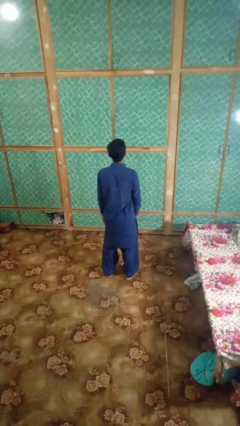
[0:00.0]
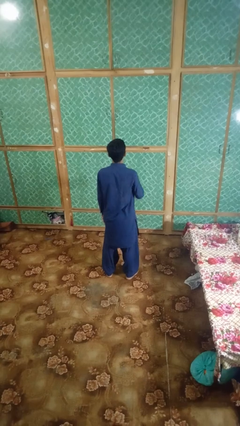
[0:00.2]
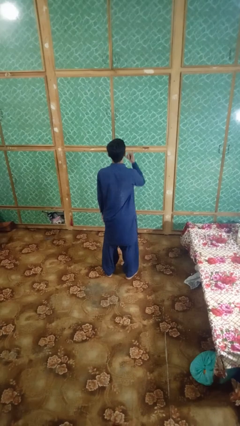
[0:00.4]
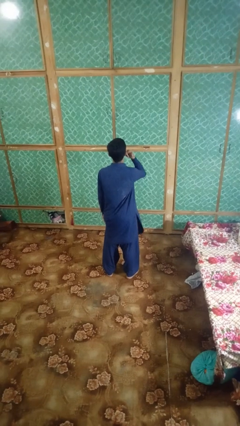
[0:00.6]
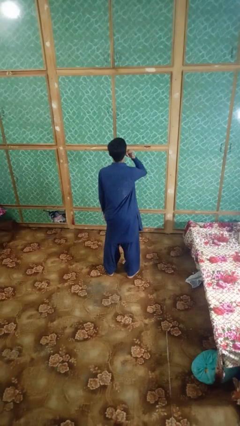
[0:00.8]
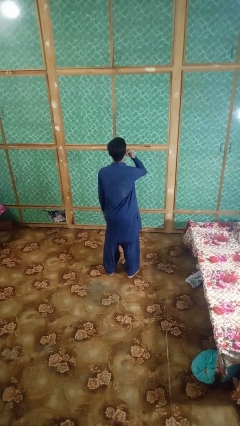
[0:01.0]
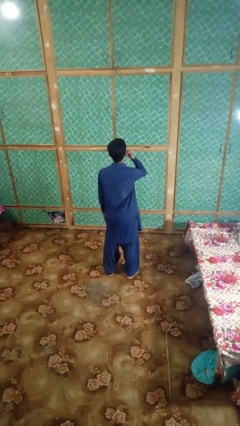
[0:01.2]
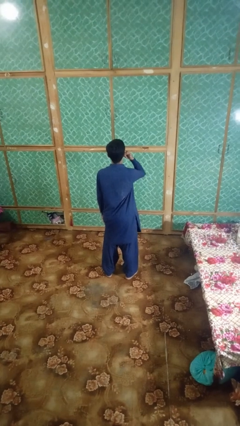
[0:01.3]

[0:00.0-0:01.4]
person gestures call me

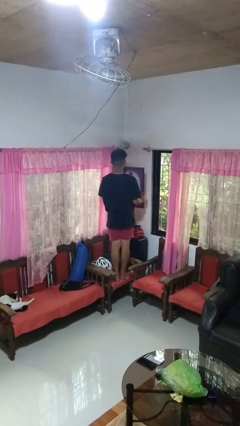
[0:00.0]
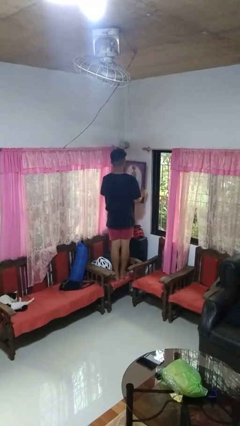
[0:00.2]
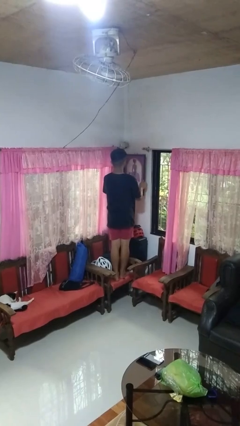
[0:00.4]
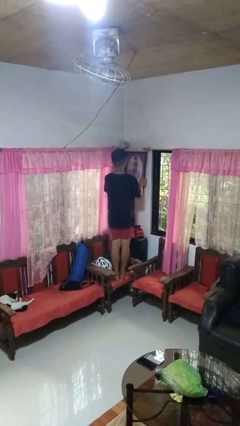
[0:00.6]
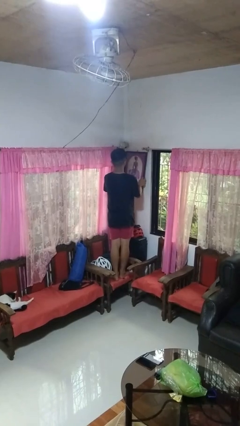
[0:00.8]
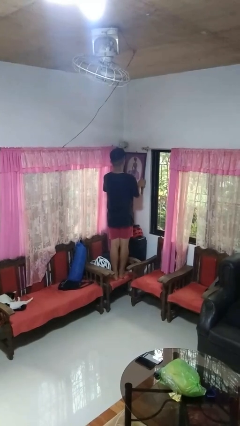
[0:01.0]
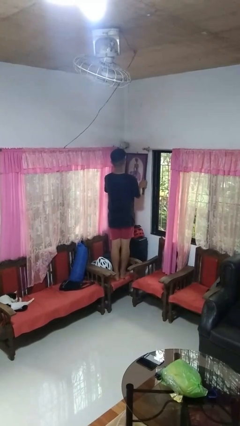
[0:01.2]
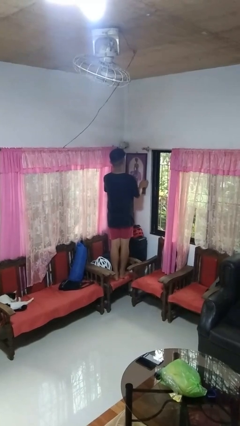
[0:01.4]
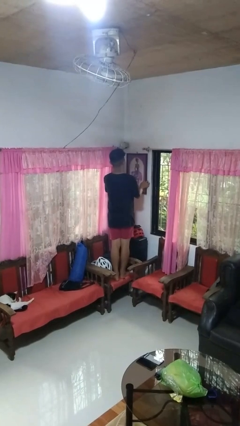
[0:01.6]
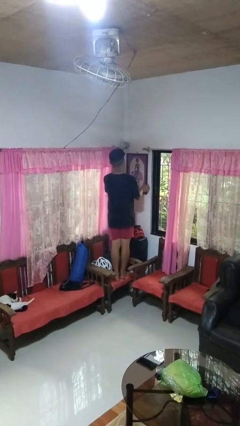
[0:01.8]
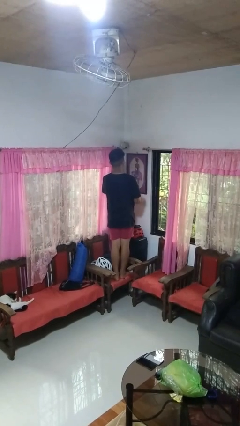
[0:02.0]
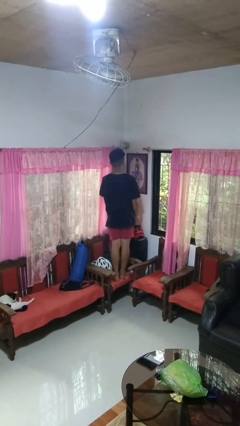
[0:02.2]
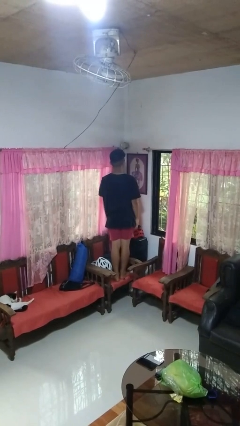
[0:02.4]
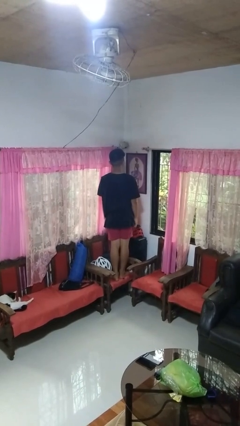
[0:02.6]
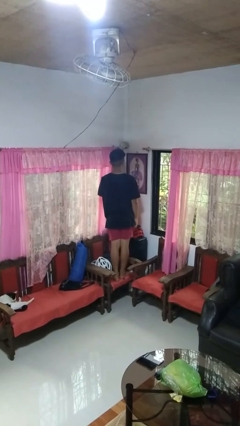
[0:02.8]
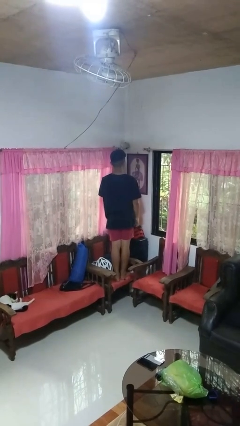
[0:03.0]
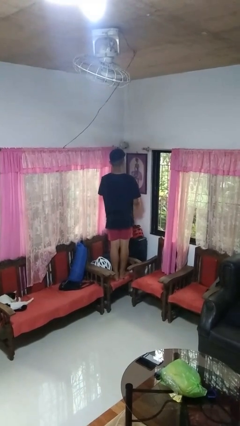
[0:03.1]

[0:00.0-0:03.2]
person puts up picture frame

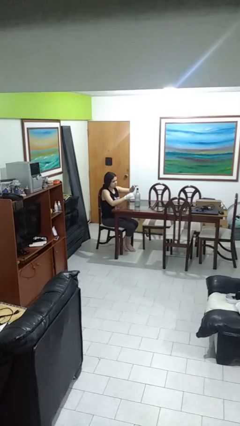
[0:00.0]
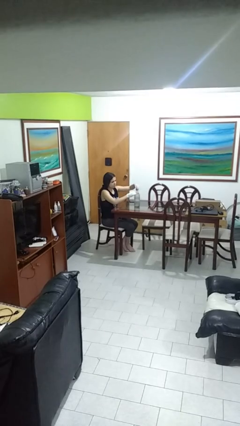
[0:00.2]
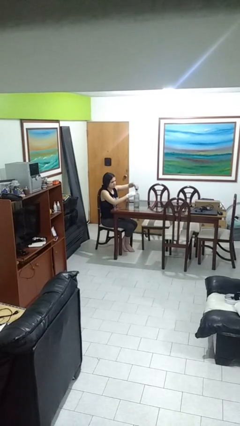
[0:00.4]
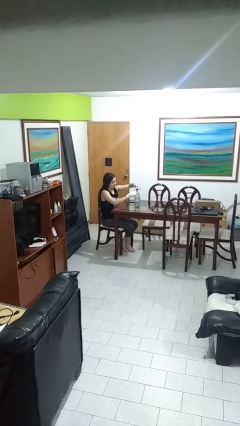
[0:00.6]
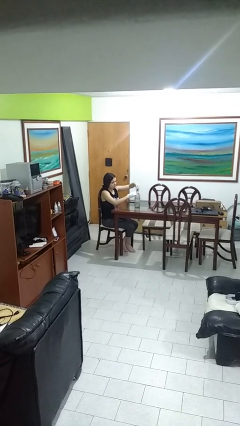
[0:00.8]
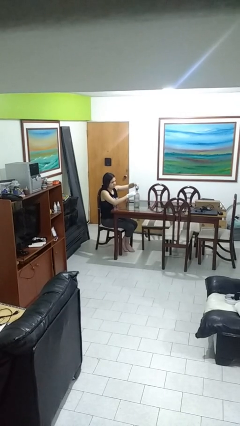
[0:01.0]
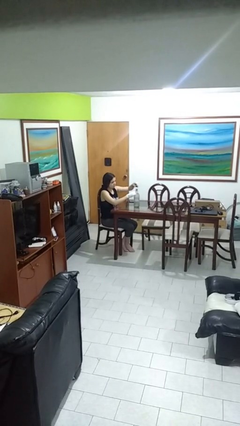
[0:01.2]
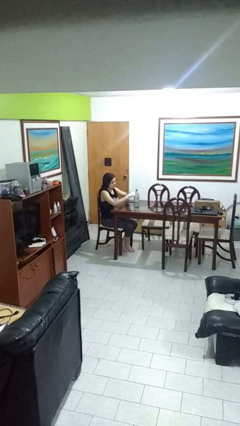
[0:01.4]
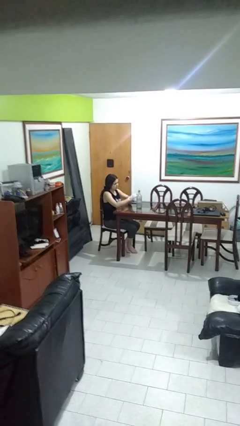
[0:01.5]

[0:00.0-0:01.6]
person unscrews lid from bottle

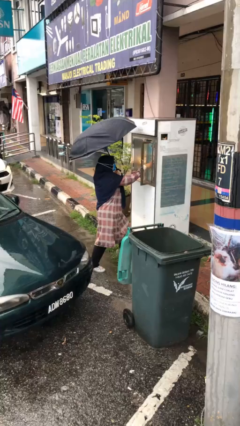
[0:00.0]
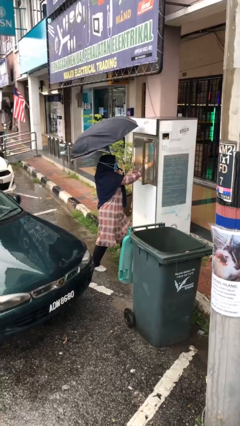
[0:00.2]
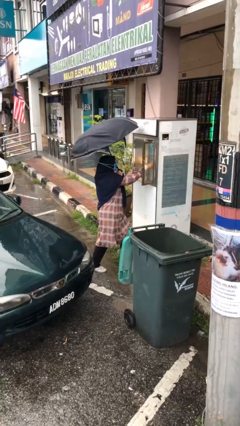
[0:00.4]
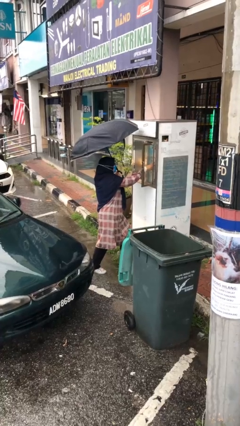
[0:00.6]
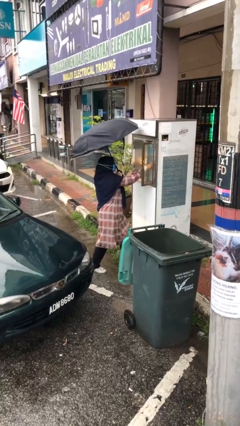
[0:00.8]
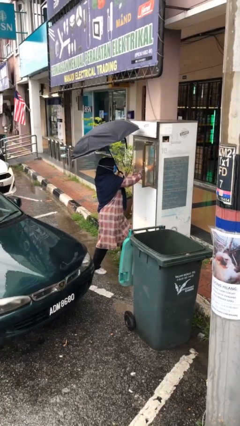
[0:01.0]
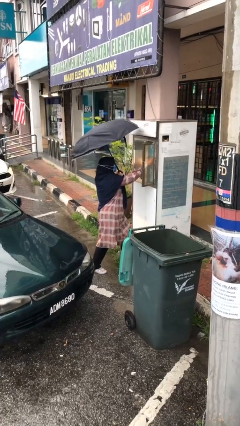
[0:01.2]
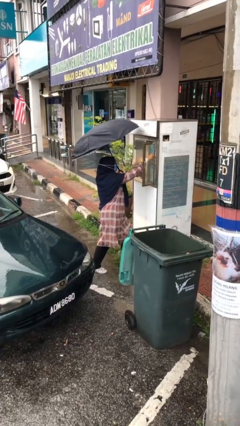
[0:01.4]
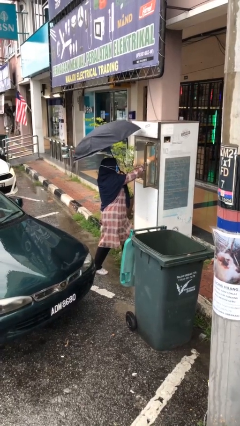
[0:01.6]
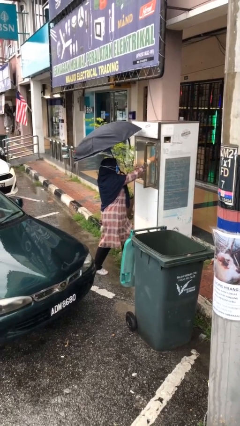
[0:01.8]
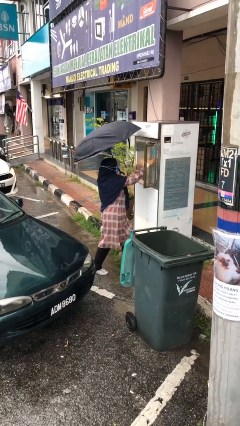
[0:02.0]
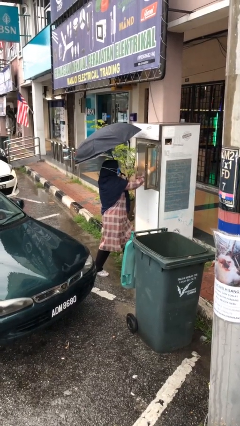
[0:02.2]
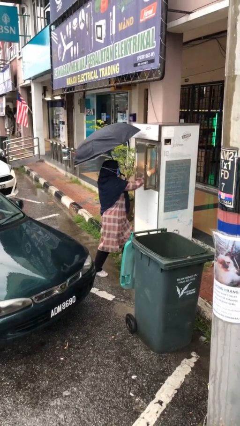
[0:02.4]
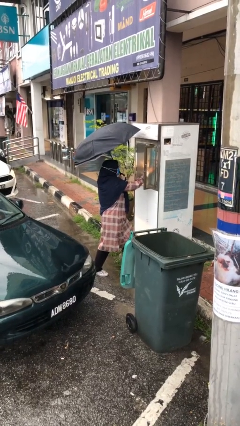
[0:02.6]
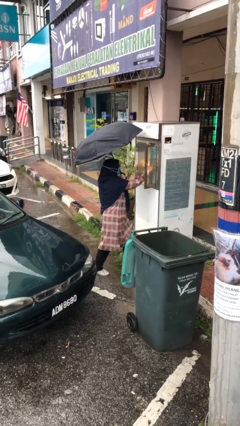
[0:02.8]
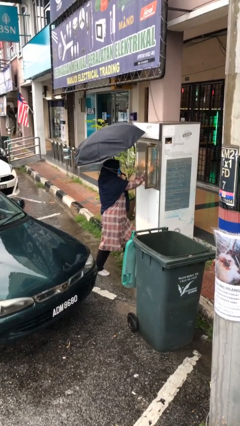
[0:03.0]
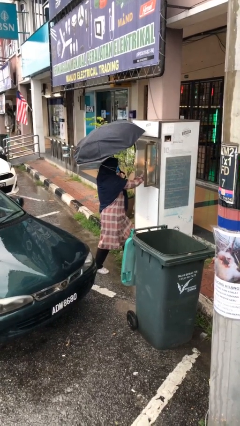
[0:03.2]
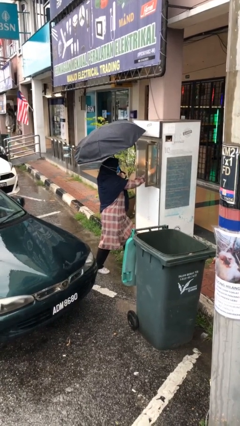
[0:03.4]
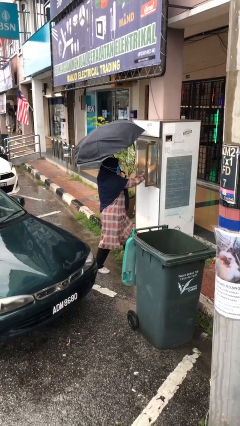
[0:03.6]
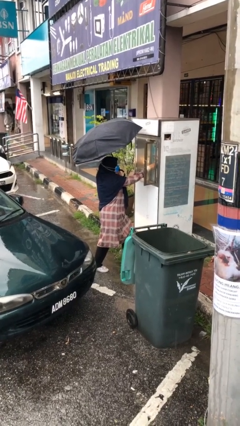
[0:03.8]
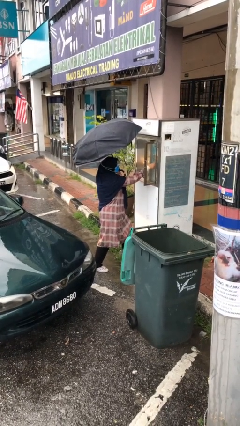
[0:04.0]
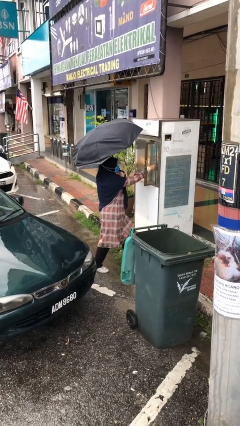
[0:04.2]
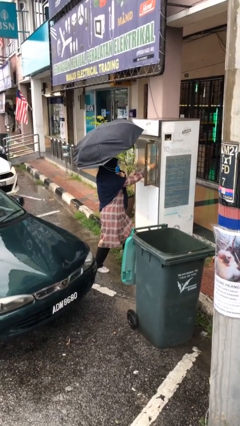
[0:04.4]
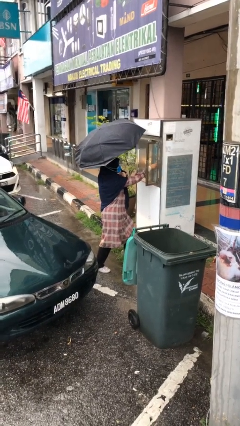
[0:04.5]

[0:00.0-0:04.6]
person purchases from machine

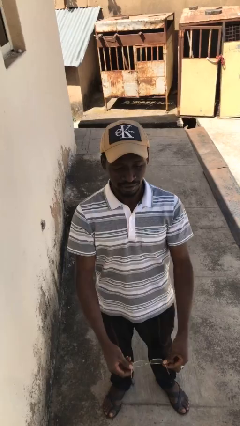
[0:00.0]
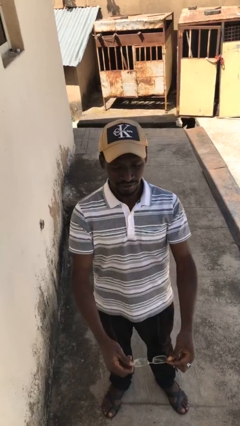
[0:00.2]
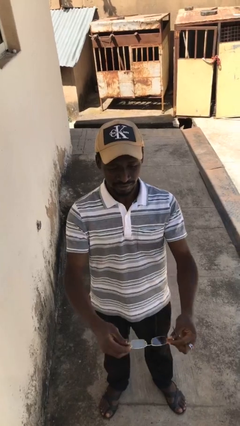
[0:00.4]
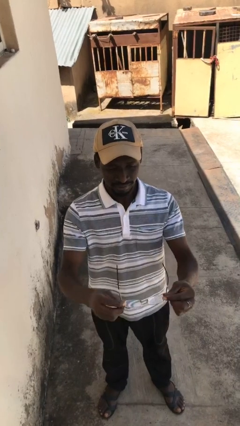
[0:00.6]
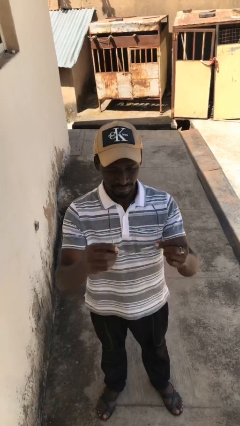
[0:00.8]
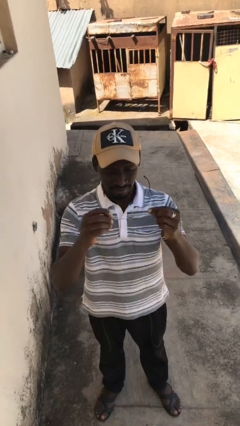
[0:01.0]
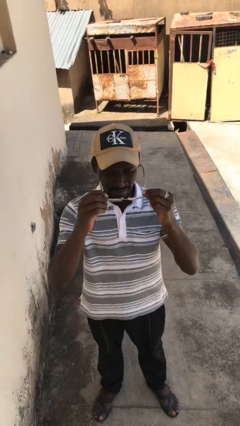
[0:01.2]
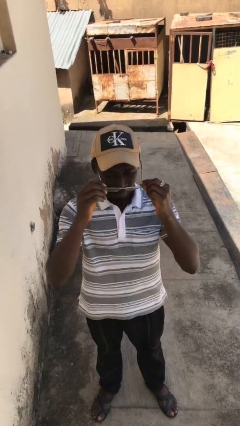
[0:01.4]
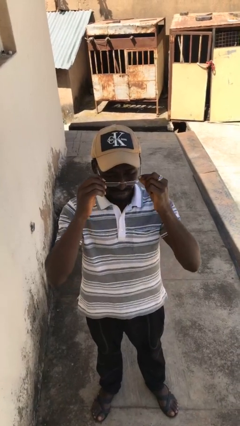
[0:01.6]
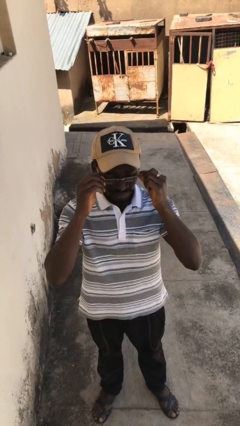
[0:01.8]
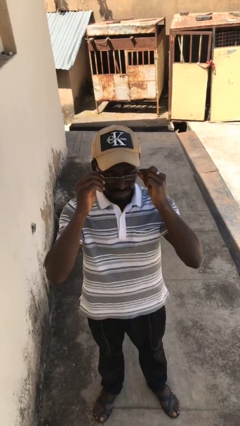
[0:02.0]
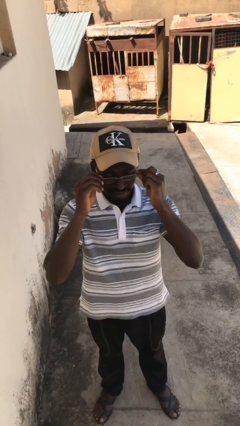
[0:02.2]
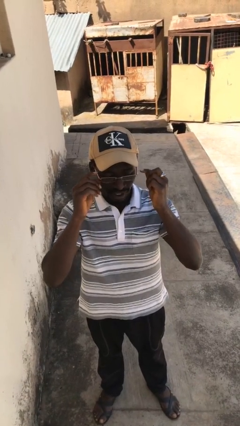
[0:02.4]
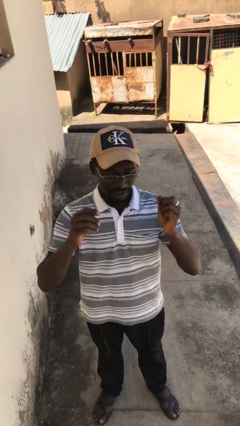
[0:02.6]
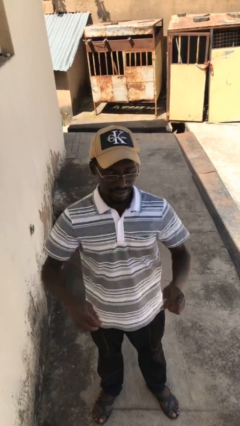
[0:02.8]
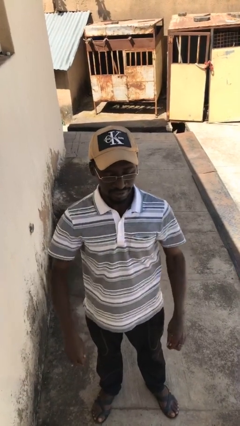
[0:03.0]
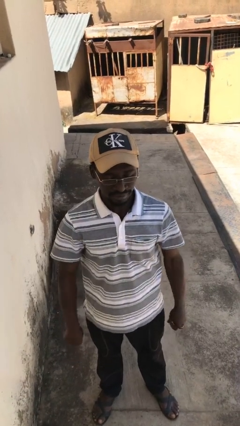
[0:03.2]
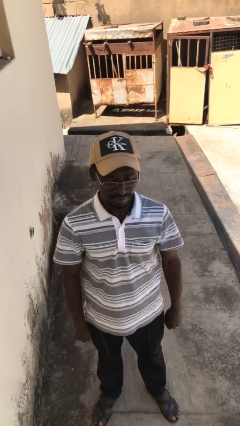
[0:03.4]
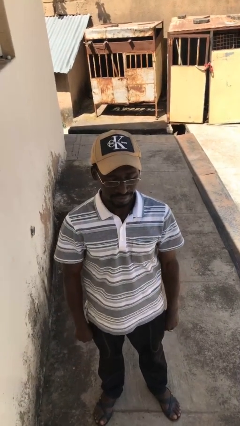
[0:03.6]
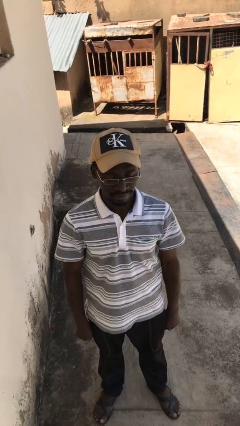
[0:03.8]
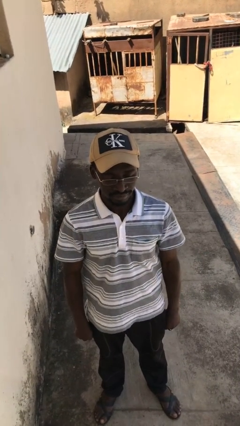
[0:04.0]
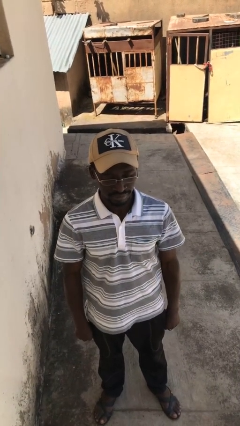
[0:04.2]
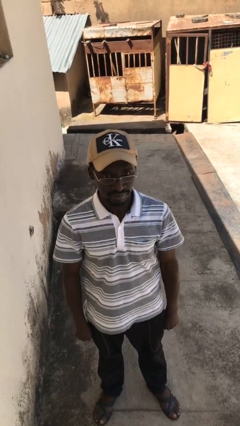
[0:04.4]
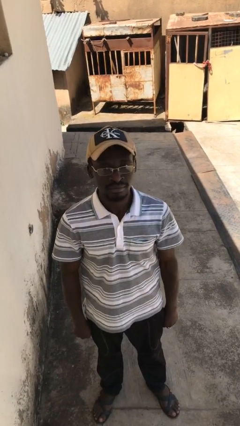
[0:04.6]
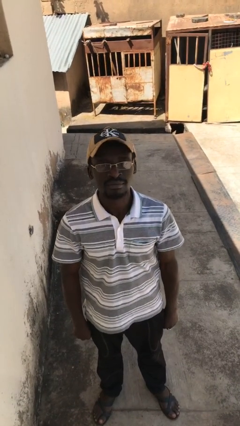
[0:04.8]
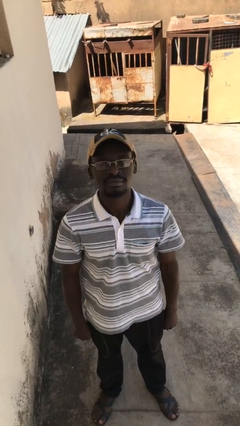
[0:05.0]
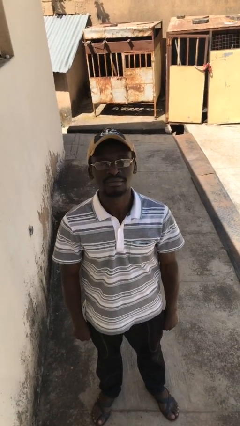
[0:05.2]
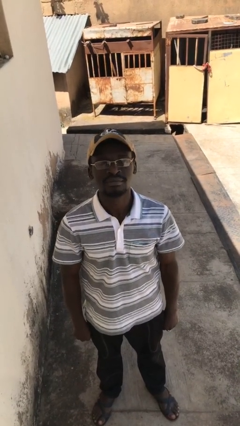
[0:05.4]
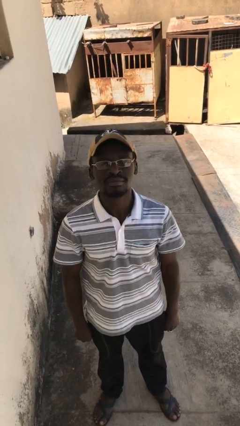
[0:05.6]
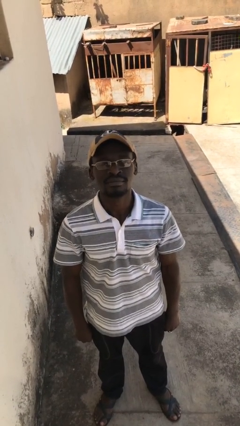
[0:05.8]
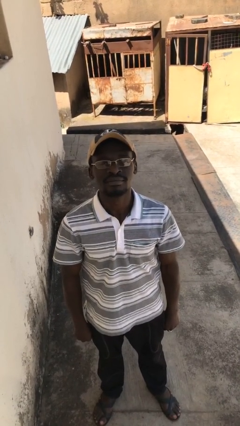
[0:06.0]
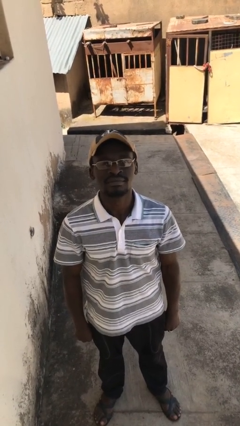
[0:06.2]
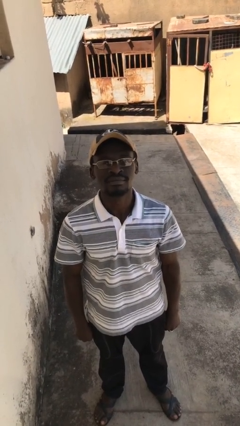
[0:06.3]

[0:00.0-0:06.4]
person puts on glasses

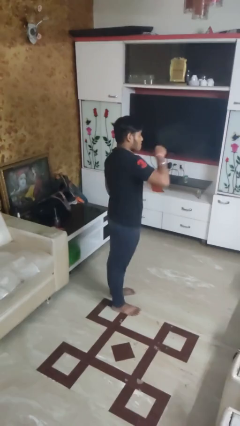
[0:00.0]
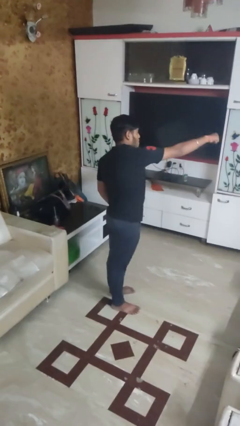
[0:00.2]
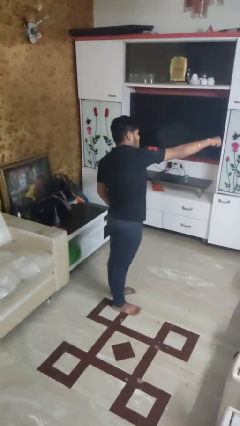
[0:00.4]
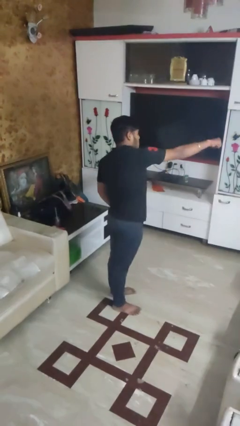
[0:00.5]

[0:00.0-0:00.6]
person punches
